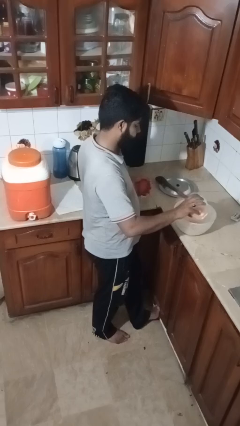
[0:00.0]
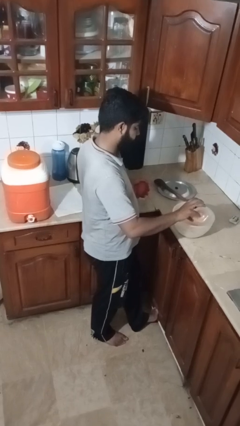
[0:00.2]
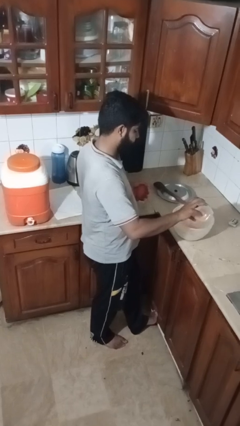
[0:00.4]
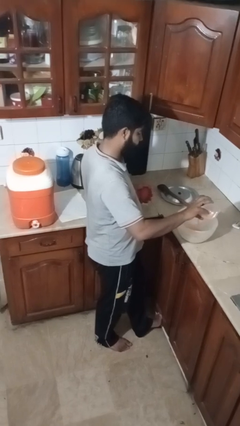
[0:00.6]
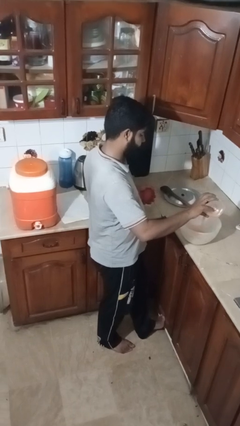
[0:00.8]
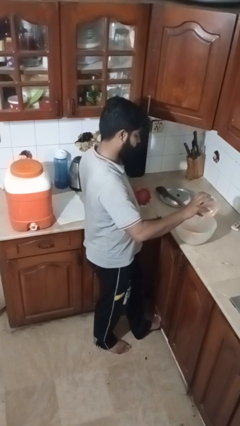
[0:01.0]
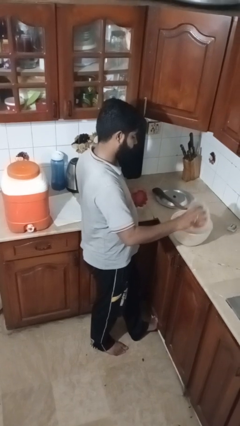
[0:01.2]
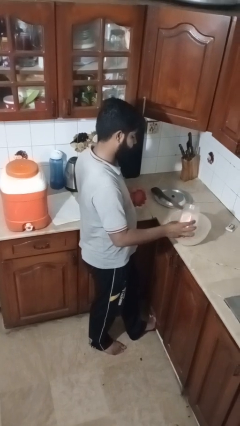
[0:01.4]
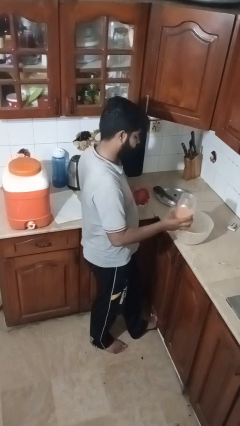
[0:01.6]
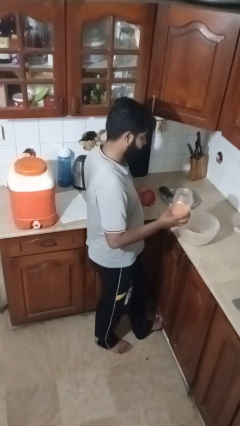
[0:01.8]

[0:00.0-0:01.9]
person pours into bowl

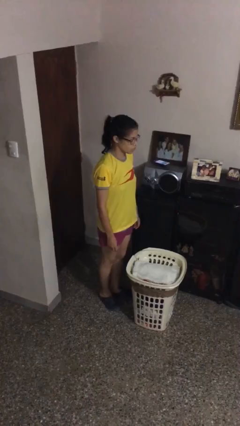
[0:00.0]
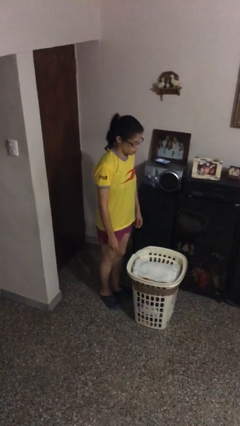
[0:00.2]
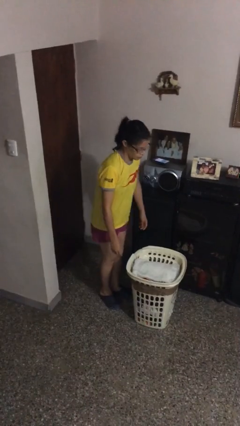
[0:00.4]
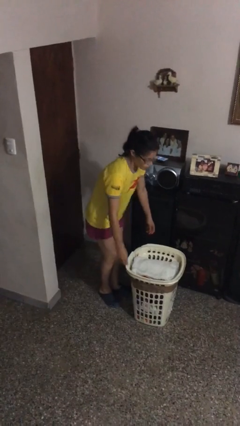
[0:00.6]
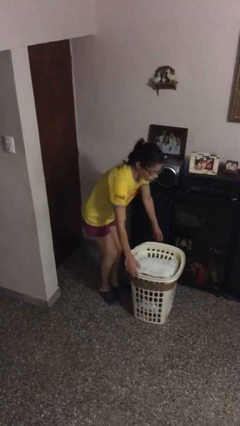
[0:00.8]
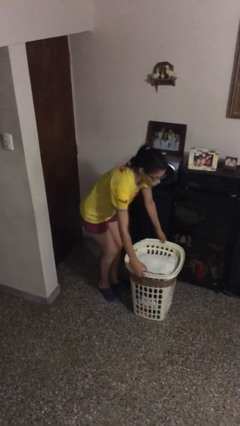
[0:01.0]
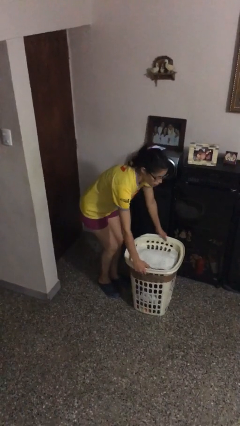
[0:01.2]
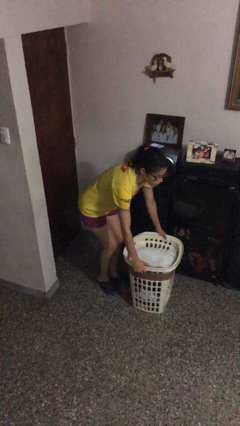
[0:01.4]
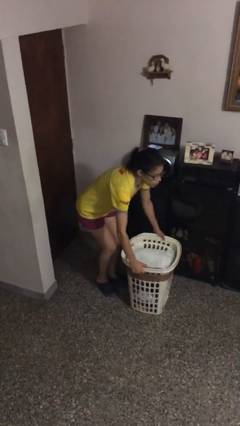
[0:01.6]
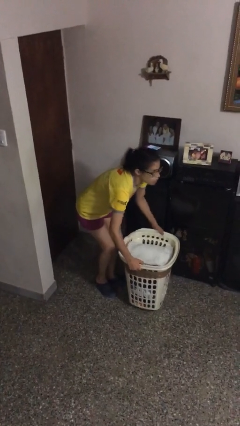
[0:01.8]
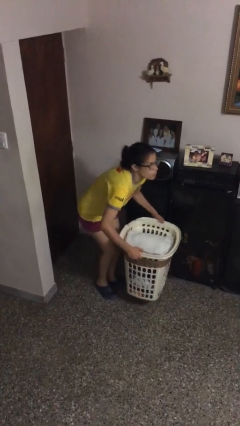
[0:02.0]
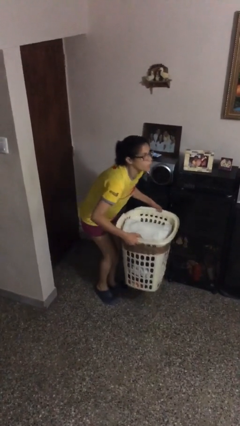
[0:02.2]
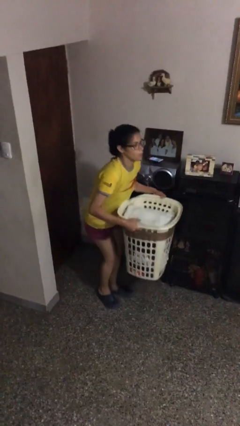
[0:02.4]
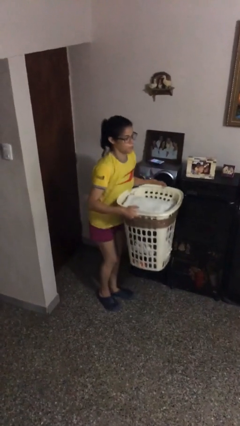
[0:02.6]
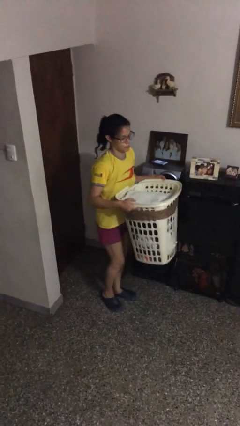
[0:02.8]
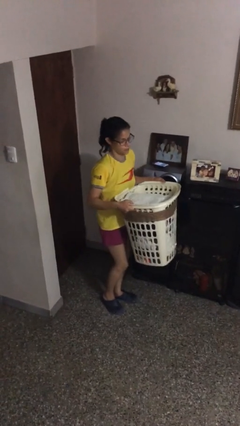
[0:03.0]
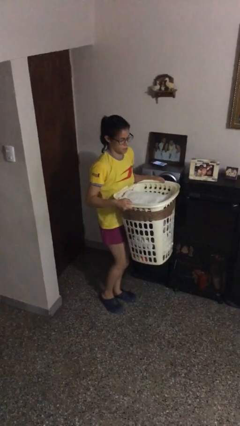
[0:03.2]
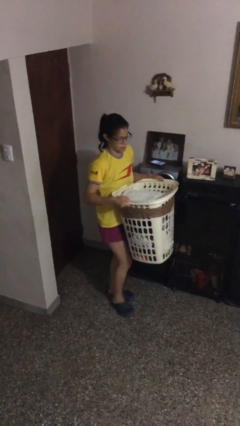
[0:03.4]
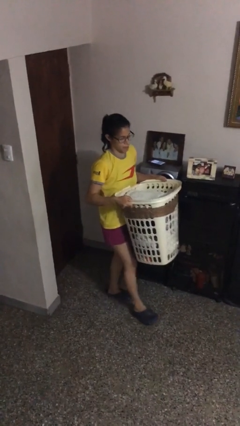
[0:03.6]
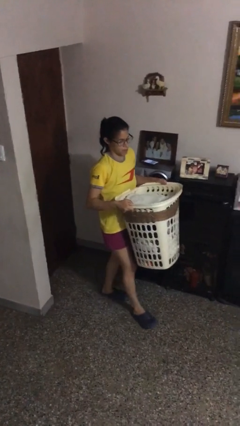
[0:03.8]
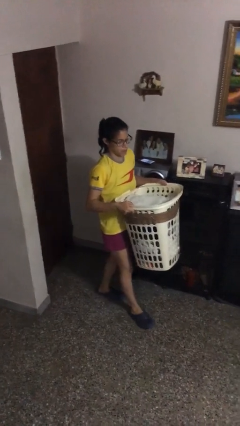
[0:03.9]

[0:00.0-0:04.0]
person picks up object from floor

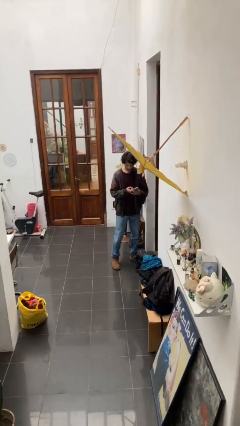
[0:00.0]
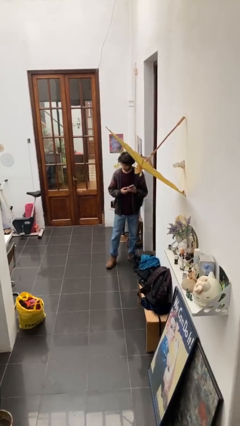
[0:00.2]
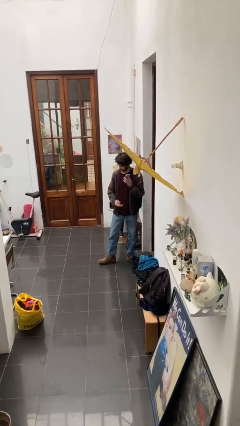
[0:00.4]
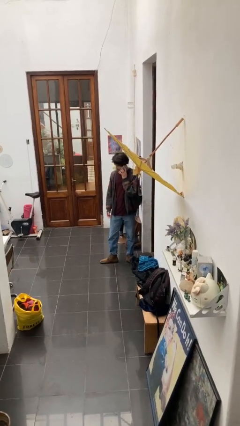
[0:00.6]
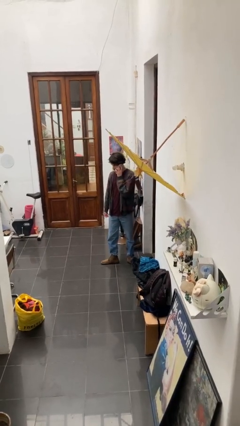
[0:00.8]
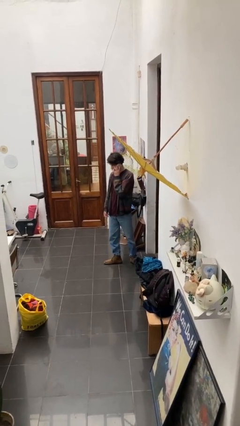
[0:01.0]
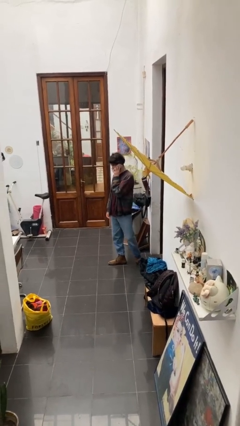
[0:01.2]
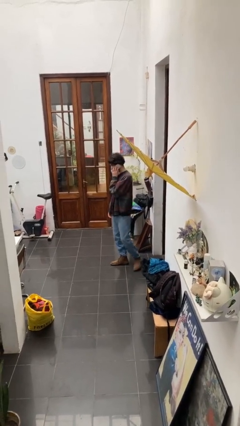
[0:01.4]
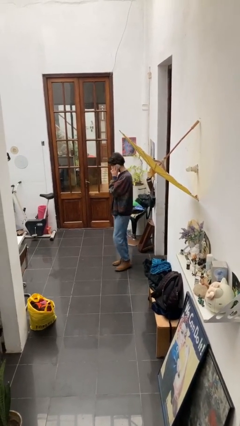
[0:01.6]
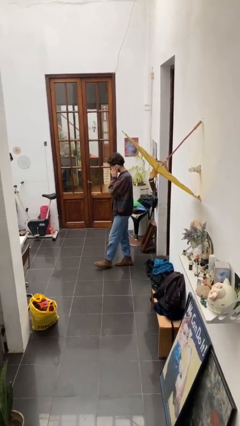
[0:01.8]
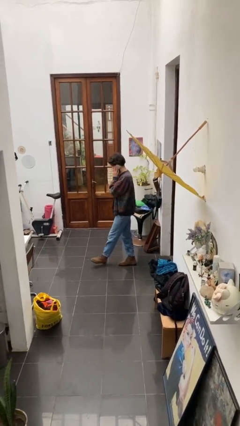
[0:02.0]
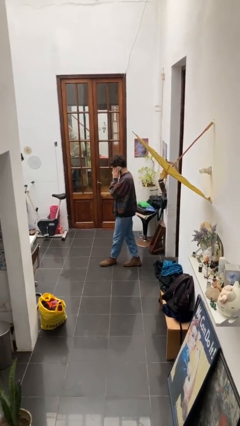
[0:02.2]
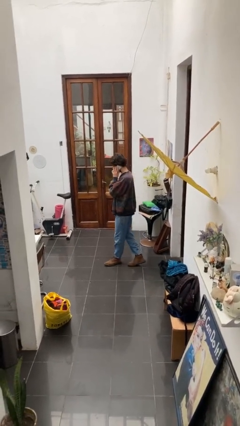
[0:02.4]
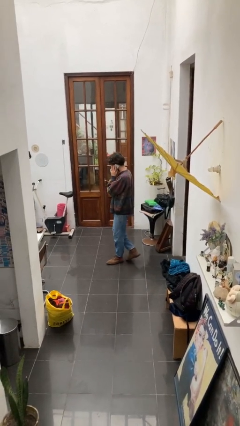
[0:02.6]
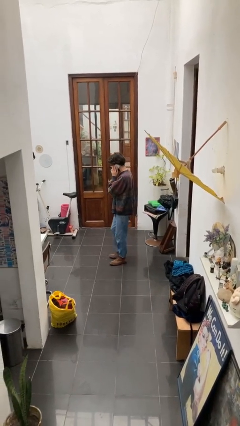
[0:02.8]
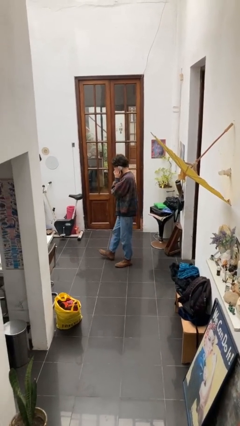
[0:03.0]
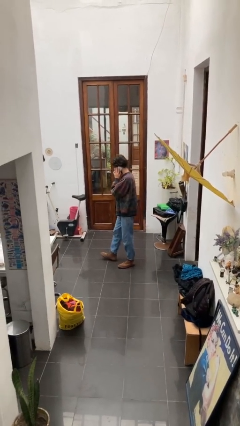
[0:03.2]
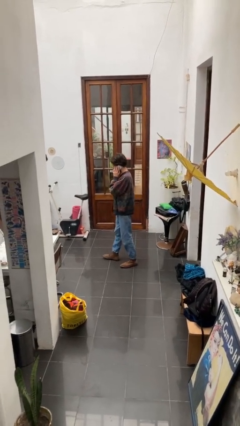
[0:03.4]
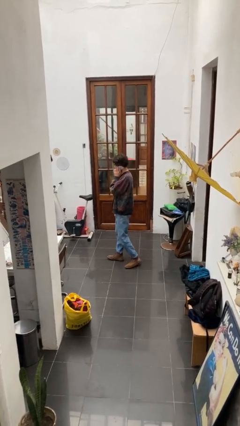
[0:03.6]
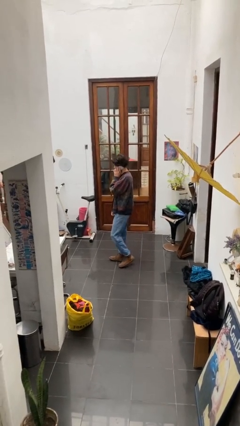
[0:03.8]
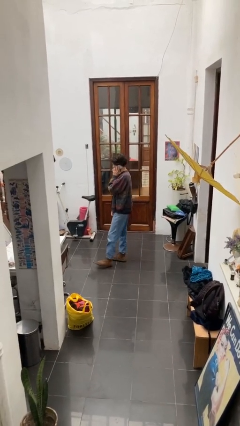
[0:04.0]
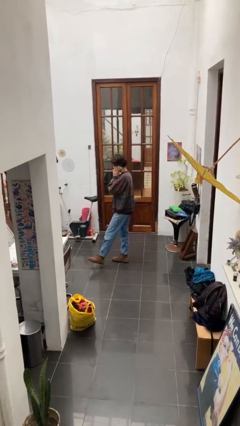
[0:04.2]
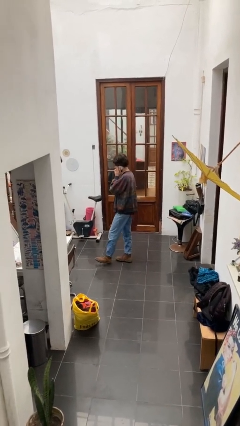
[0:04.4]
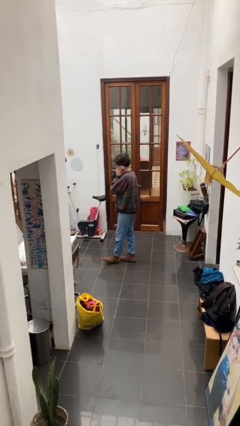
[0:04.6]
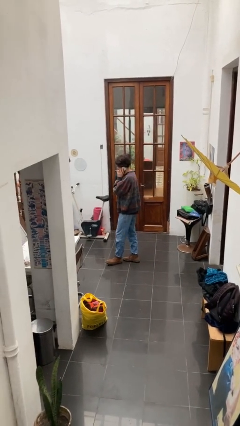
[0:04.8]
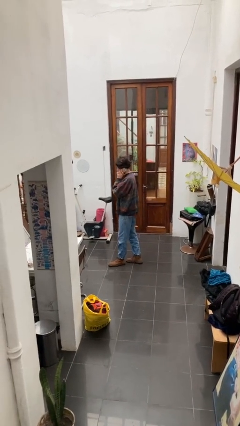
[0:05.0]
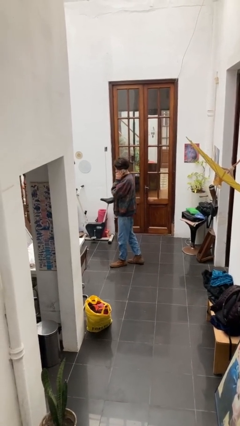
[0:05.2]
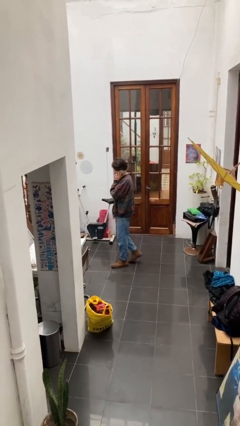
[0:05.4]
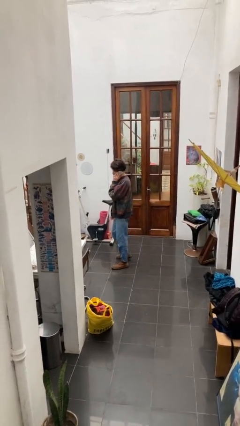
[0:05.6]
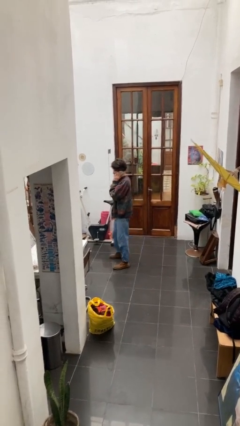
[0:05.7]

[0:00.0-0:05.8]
person talks on phone

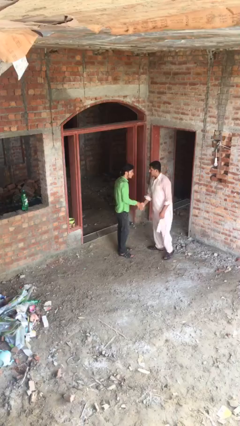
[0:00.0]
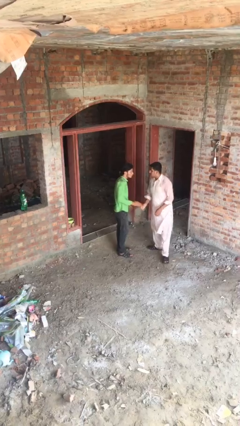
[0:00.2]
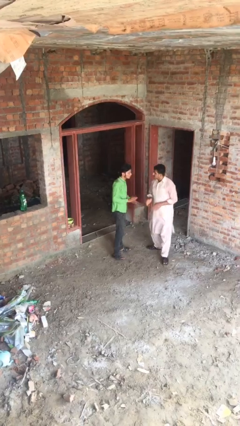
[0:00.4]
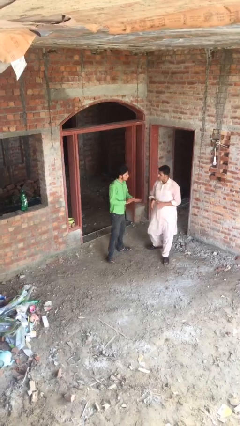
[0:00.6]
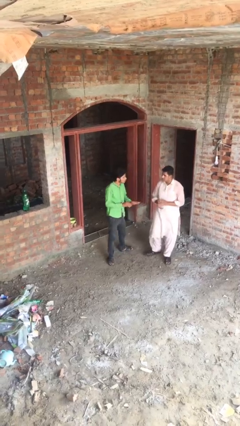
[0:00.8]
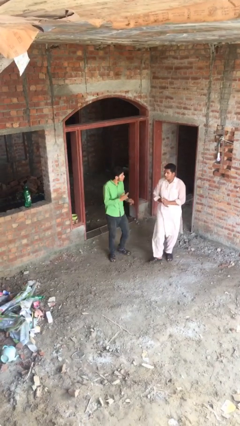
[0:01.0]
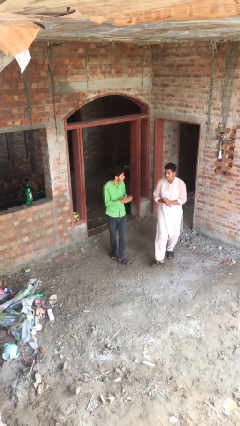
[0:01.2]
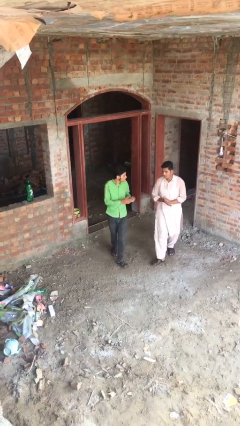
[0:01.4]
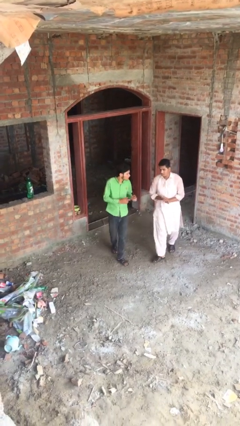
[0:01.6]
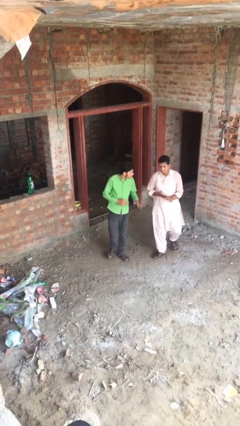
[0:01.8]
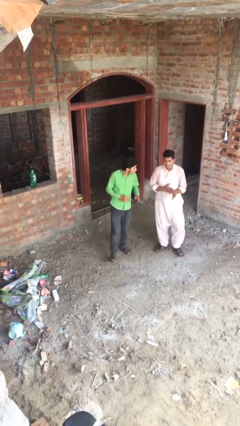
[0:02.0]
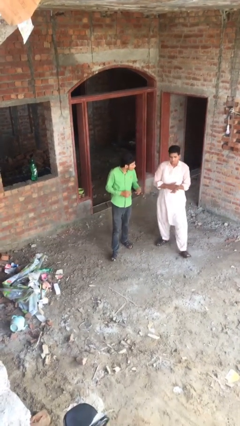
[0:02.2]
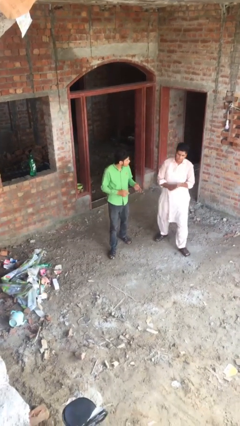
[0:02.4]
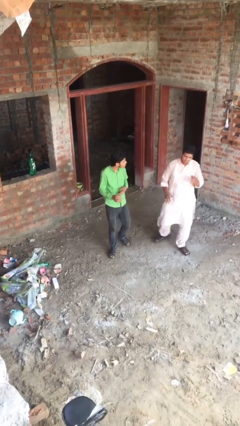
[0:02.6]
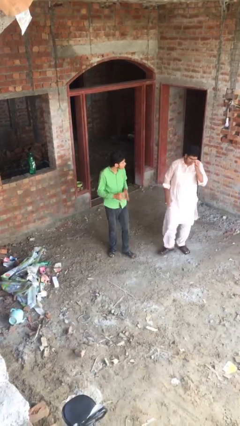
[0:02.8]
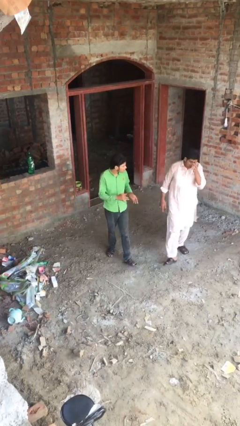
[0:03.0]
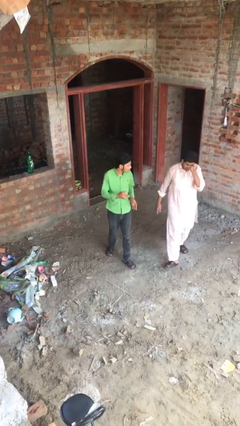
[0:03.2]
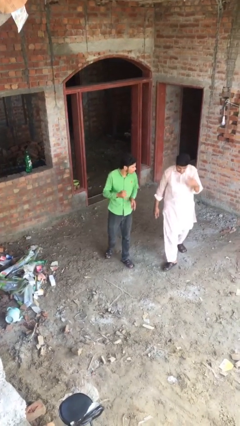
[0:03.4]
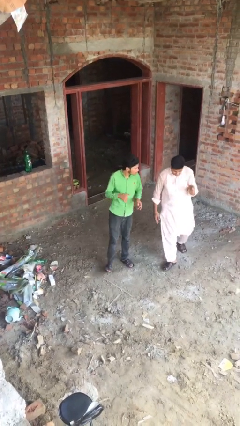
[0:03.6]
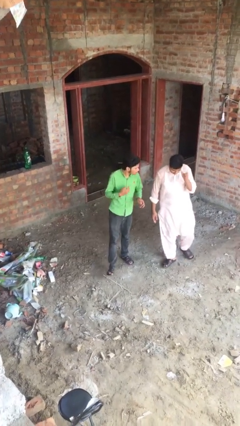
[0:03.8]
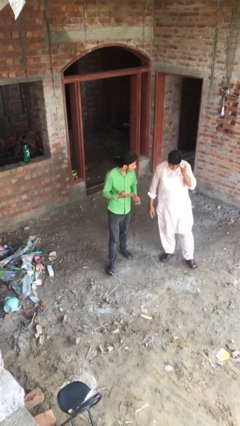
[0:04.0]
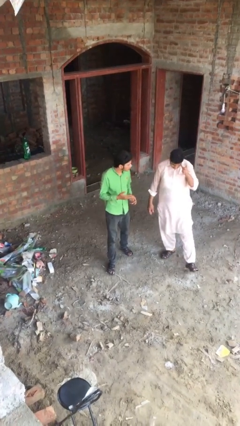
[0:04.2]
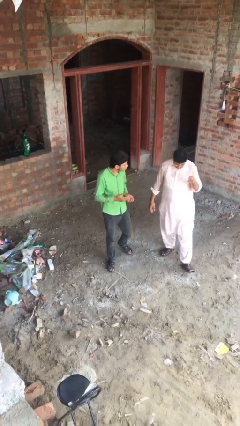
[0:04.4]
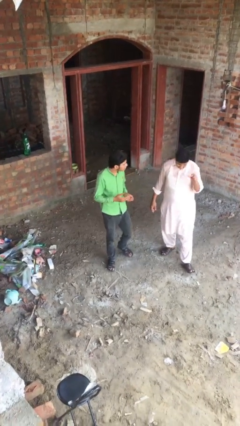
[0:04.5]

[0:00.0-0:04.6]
person talks to person

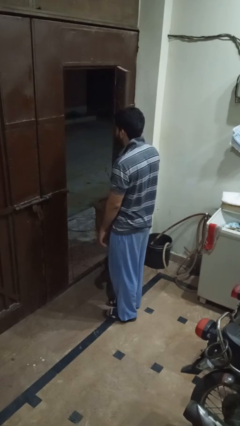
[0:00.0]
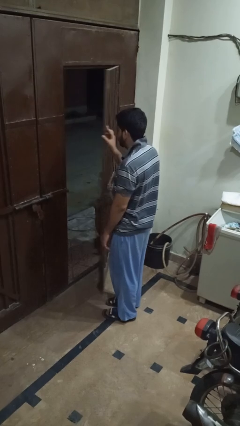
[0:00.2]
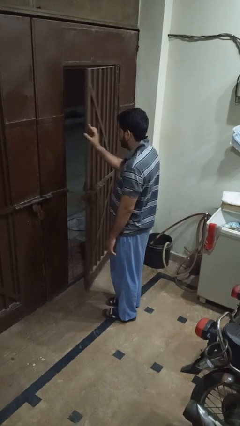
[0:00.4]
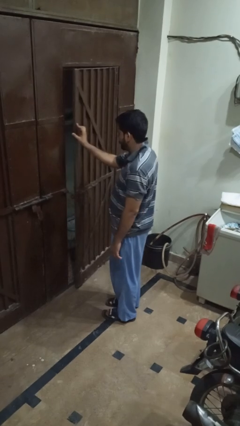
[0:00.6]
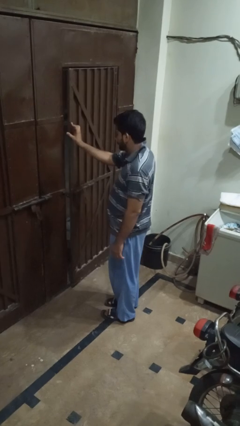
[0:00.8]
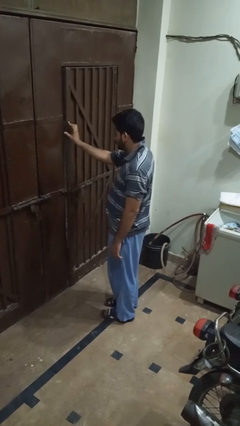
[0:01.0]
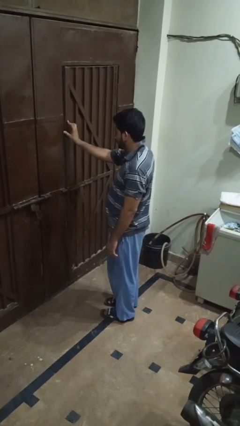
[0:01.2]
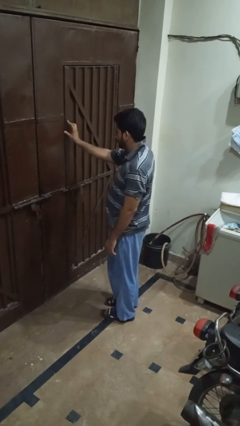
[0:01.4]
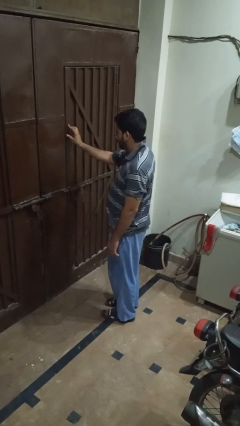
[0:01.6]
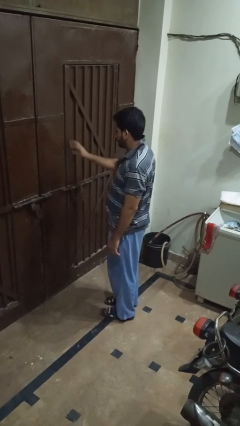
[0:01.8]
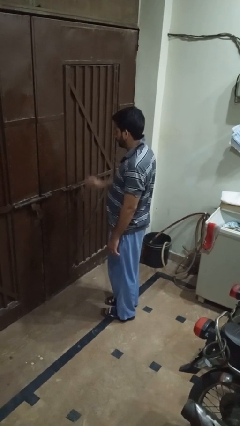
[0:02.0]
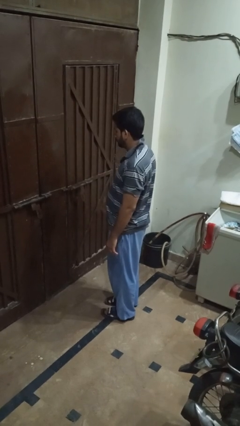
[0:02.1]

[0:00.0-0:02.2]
person closes gate
